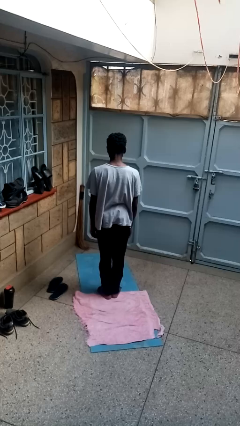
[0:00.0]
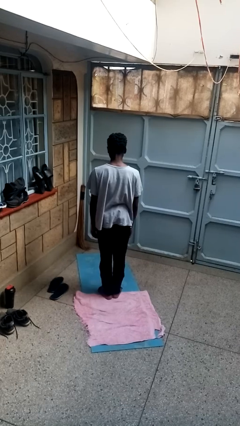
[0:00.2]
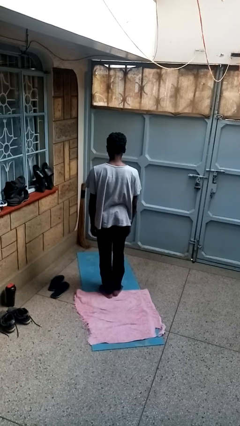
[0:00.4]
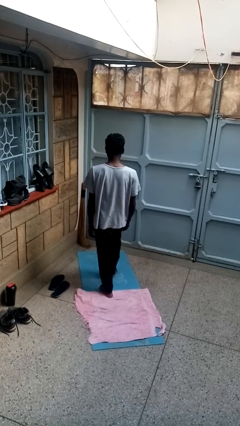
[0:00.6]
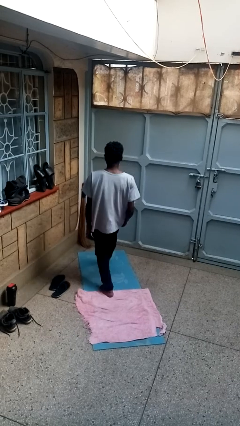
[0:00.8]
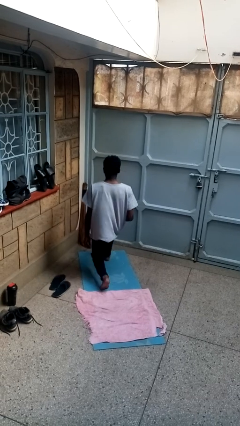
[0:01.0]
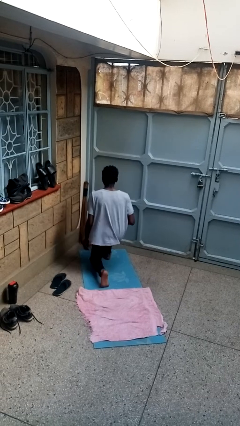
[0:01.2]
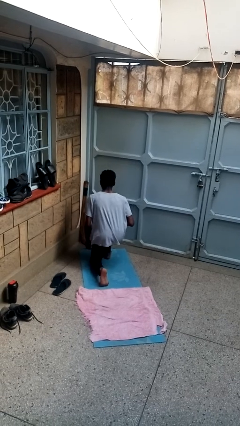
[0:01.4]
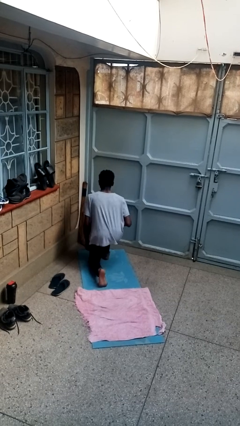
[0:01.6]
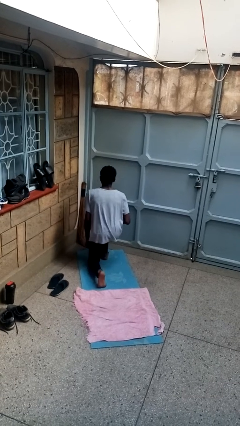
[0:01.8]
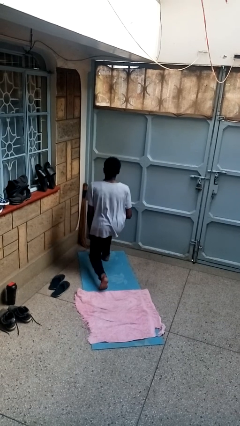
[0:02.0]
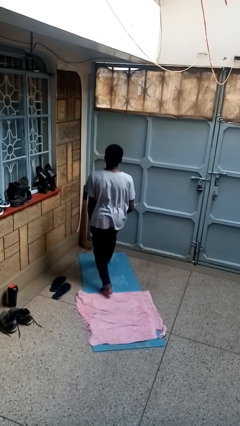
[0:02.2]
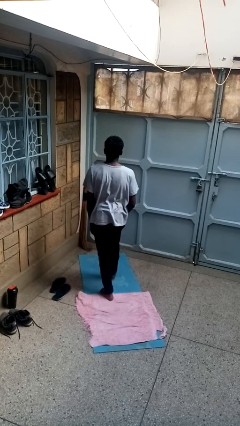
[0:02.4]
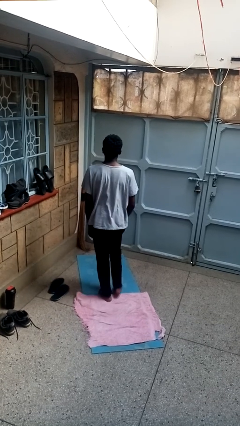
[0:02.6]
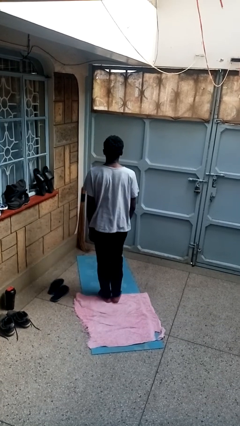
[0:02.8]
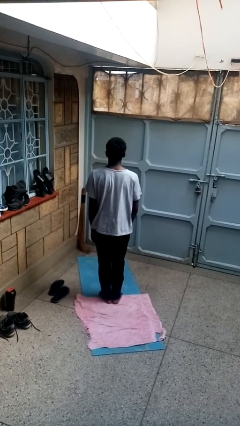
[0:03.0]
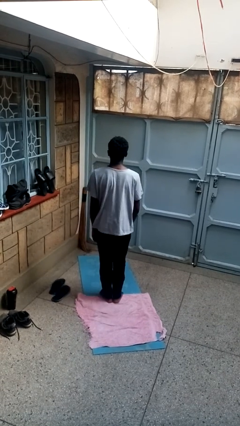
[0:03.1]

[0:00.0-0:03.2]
person exercises with lunges

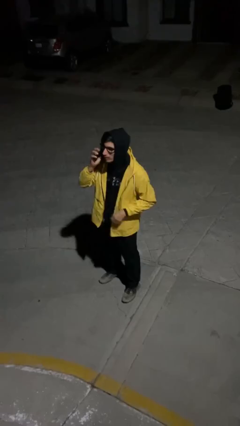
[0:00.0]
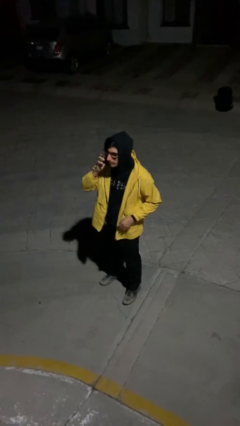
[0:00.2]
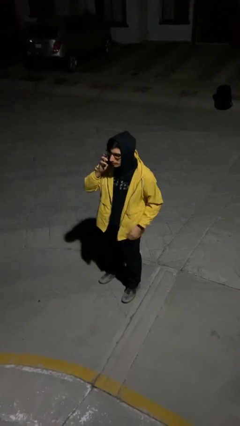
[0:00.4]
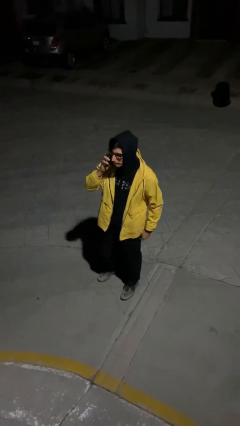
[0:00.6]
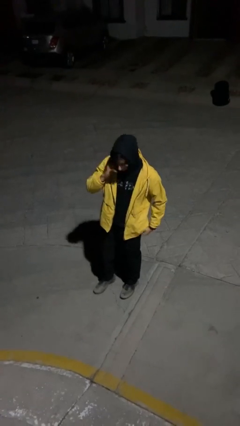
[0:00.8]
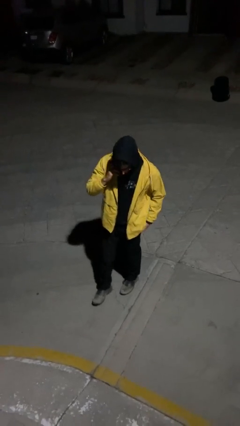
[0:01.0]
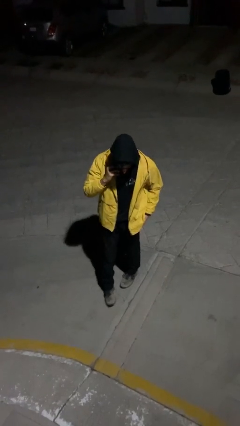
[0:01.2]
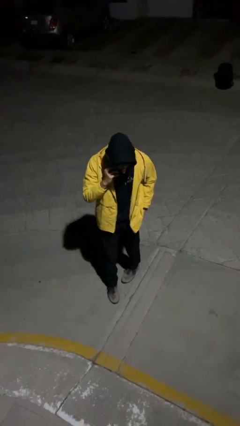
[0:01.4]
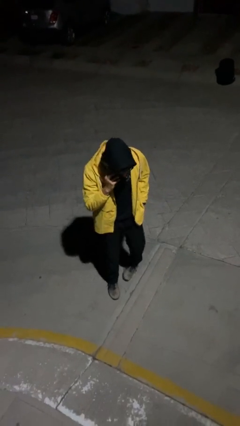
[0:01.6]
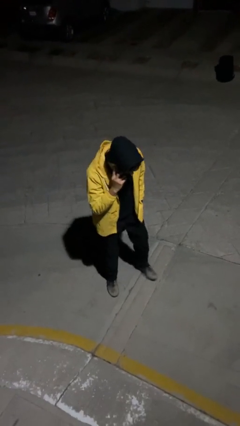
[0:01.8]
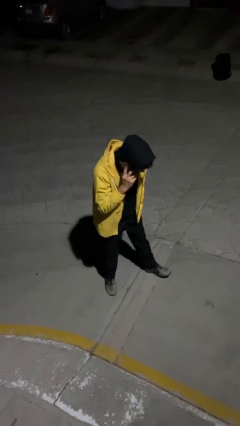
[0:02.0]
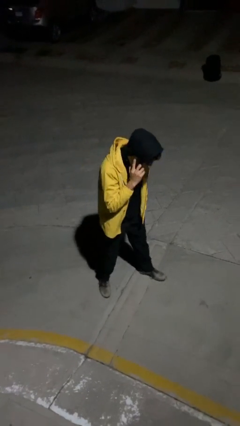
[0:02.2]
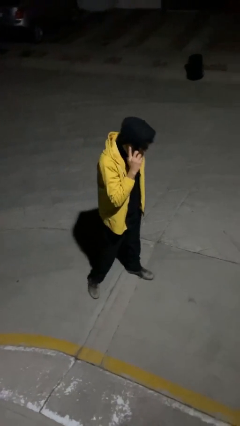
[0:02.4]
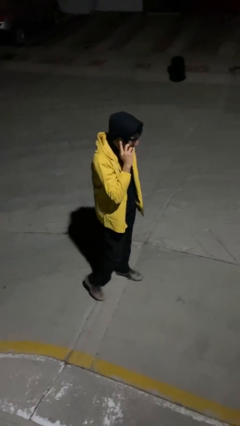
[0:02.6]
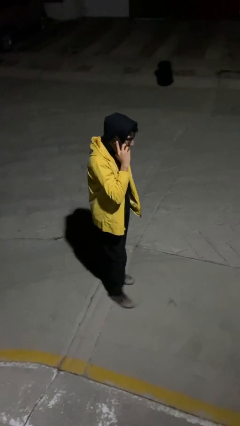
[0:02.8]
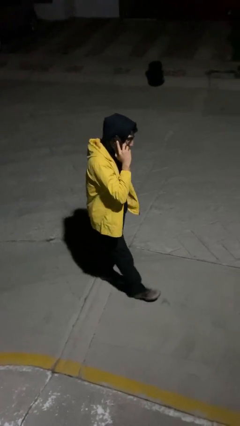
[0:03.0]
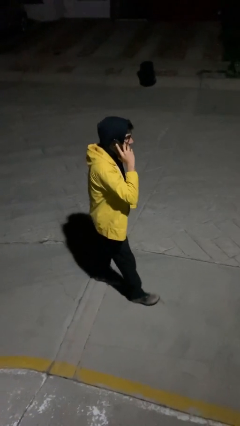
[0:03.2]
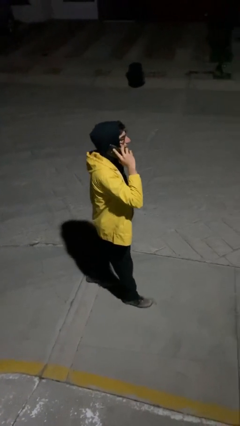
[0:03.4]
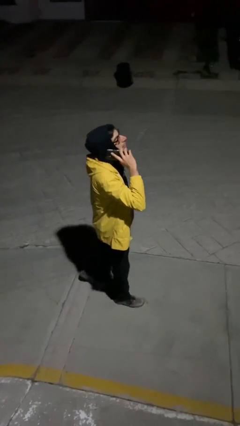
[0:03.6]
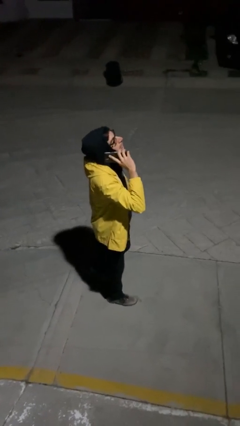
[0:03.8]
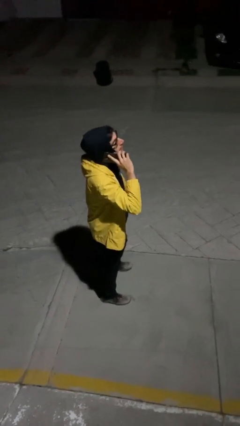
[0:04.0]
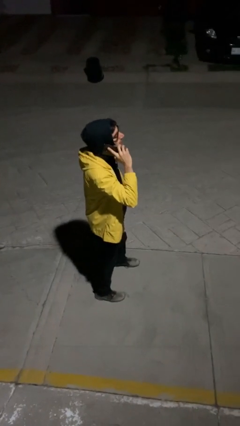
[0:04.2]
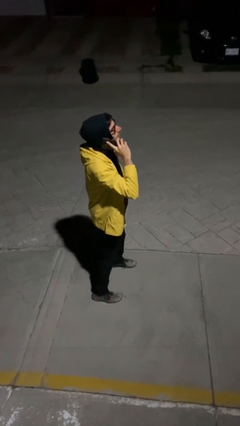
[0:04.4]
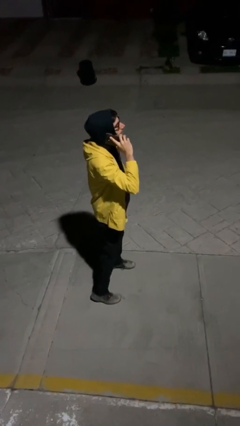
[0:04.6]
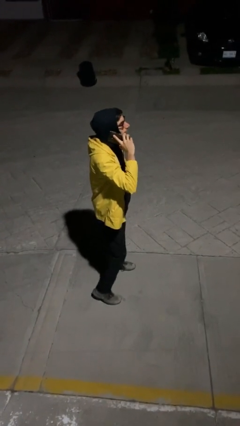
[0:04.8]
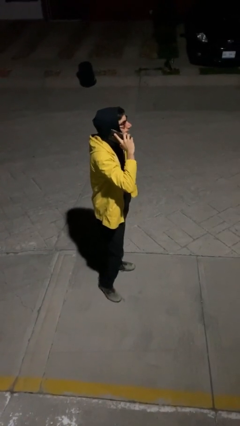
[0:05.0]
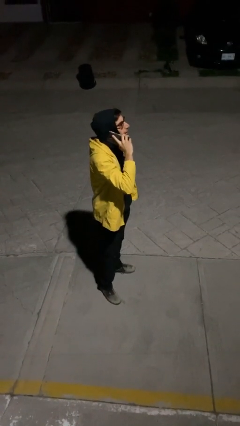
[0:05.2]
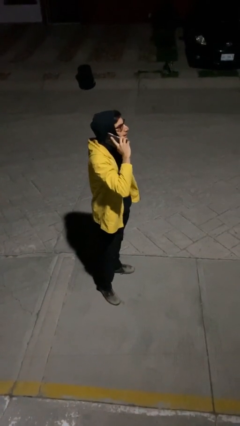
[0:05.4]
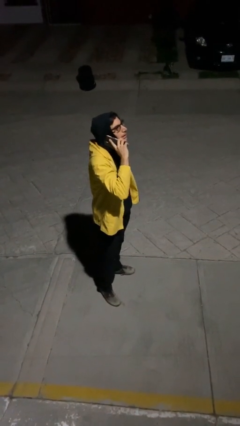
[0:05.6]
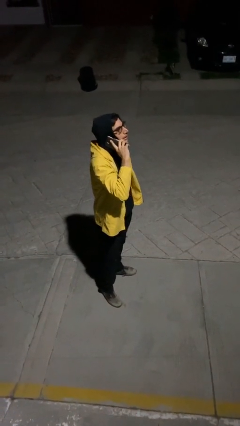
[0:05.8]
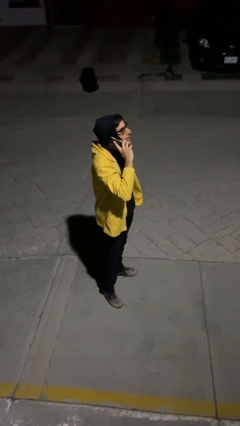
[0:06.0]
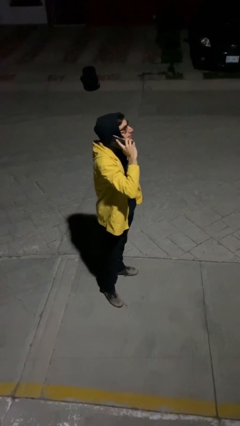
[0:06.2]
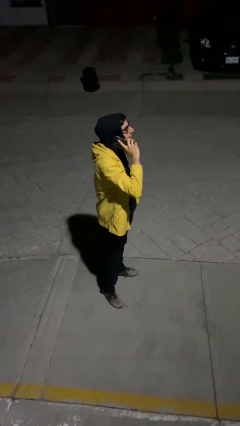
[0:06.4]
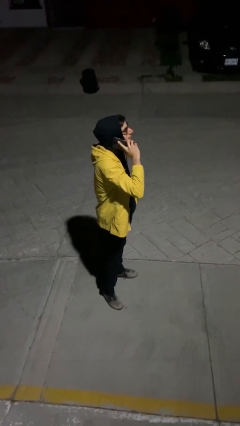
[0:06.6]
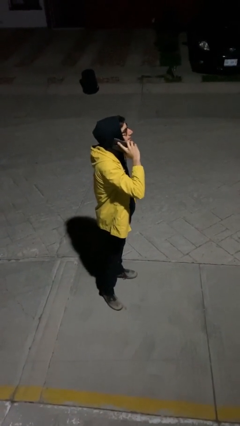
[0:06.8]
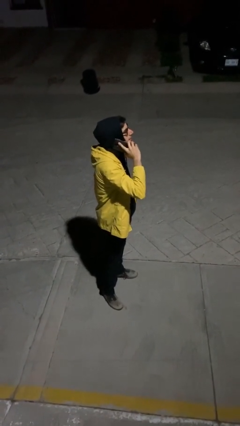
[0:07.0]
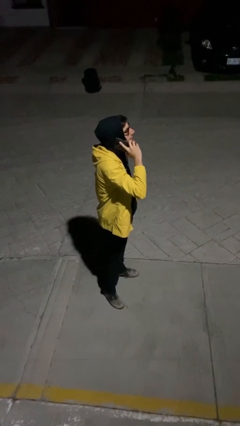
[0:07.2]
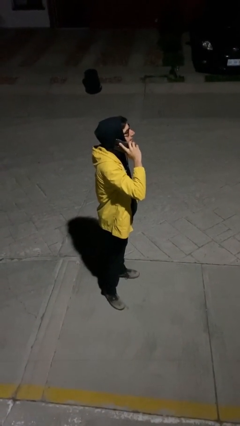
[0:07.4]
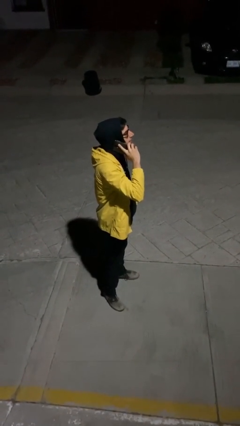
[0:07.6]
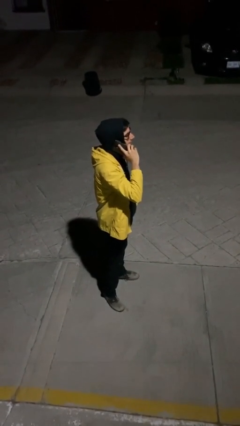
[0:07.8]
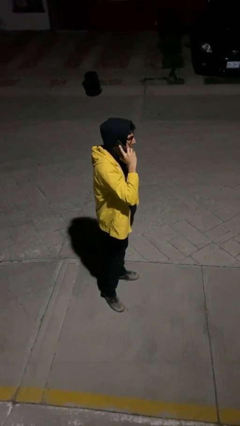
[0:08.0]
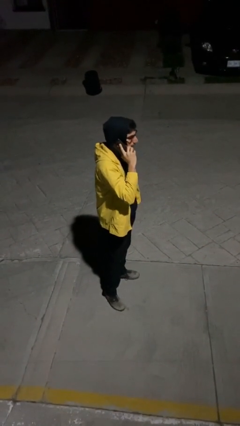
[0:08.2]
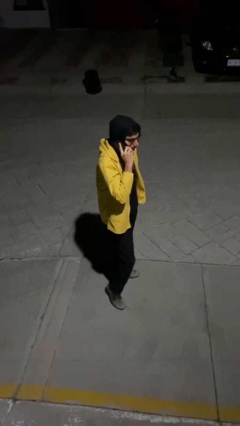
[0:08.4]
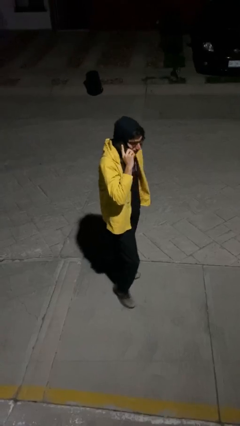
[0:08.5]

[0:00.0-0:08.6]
person talks on phone

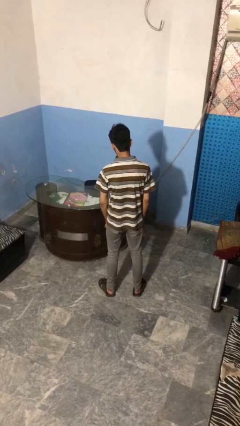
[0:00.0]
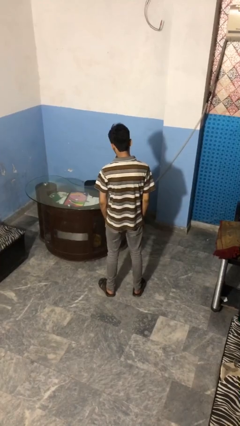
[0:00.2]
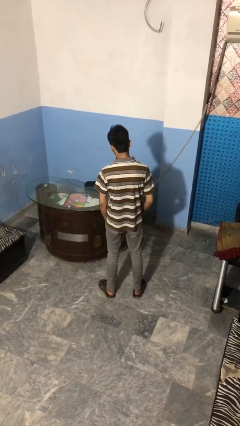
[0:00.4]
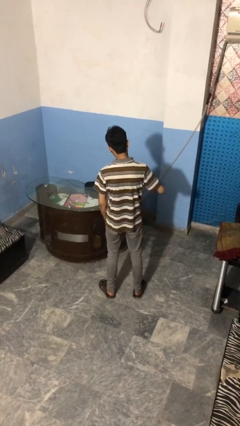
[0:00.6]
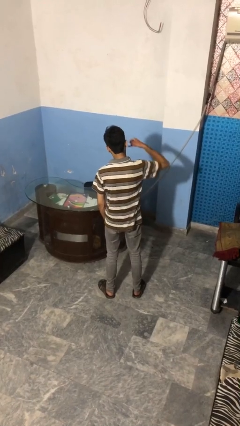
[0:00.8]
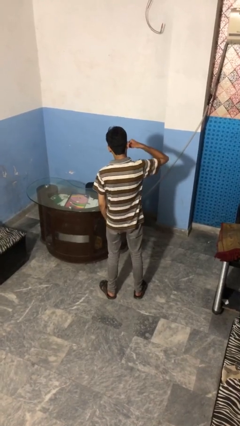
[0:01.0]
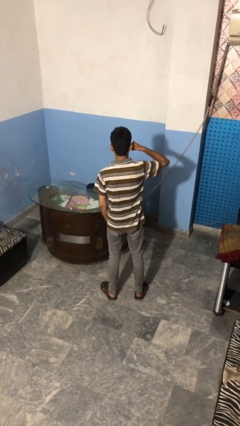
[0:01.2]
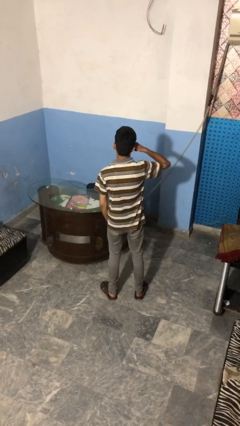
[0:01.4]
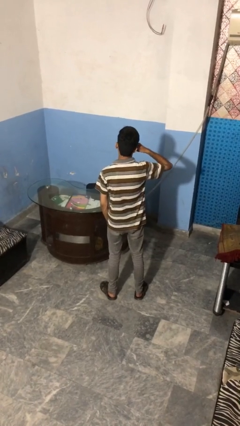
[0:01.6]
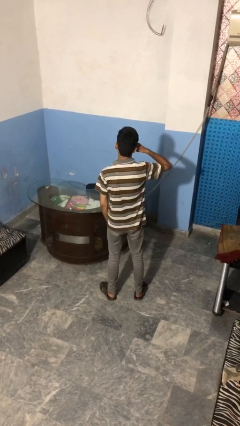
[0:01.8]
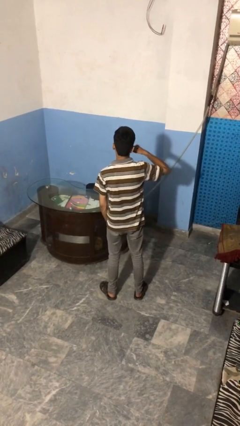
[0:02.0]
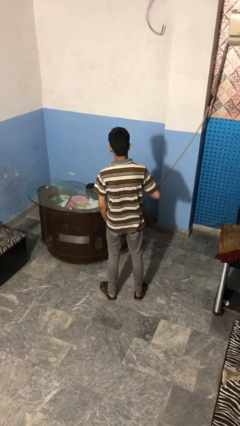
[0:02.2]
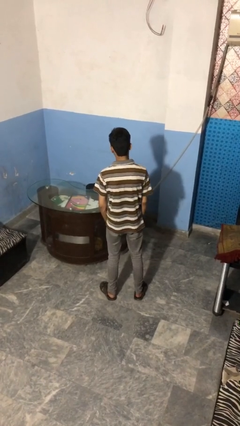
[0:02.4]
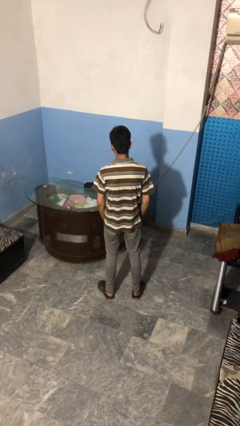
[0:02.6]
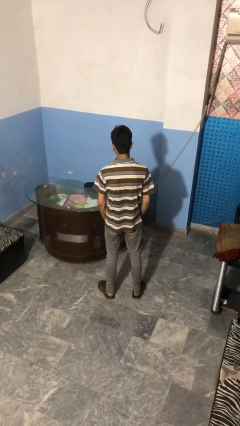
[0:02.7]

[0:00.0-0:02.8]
person gestures call me

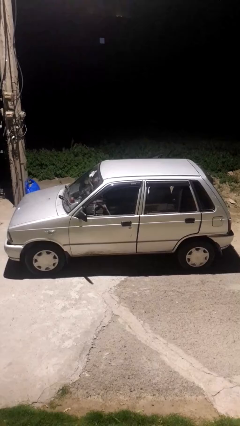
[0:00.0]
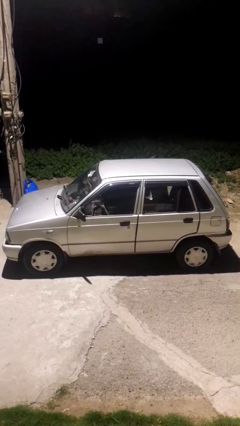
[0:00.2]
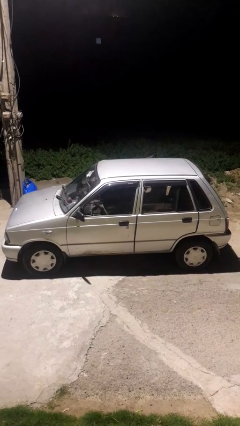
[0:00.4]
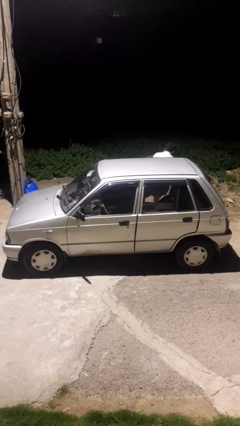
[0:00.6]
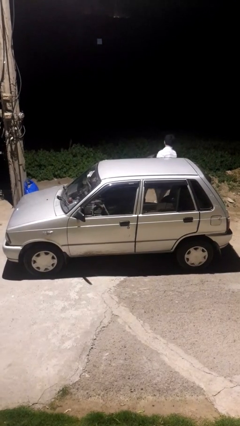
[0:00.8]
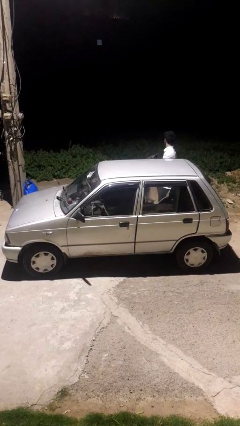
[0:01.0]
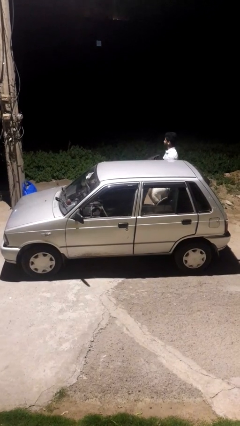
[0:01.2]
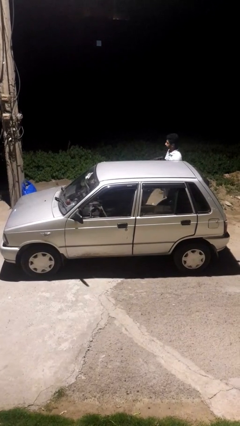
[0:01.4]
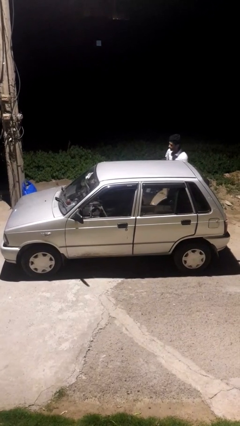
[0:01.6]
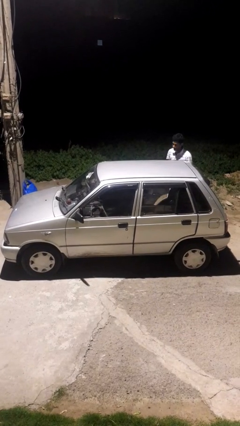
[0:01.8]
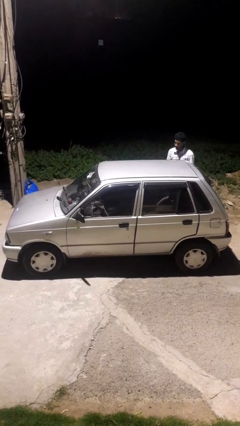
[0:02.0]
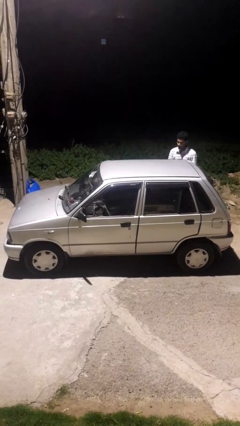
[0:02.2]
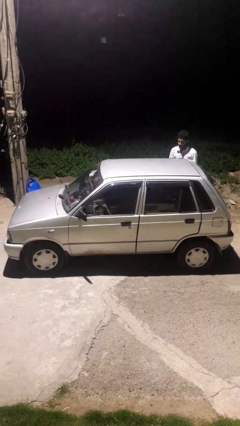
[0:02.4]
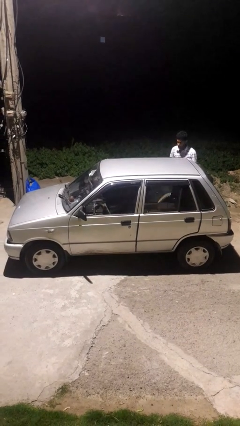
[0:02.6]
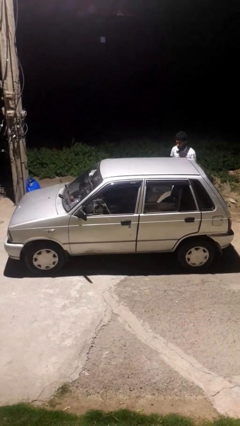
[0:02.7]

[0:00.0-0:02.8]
car drops off person

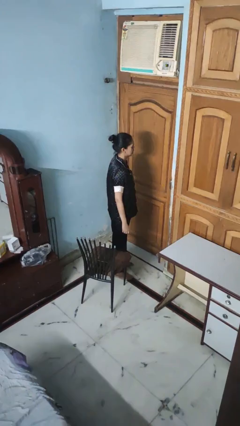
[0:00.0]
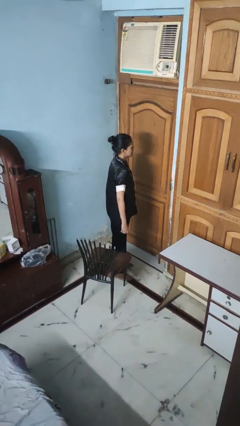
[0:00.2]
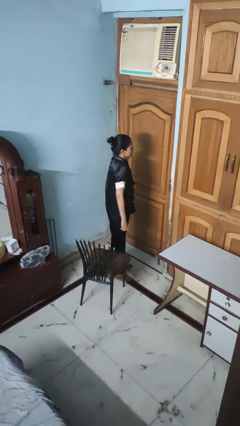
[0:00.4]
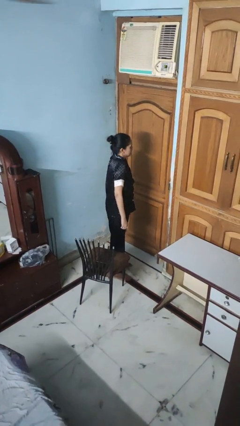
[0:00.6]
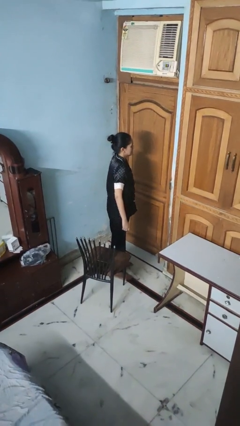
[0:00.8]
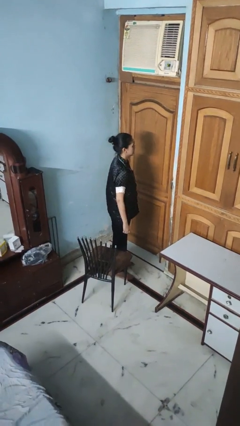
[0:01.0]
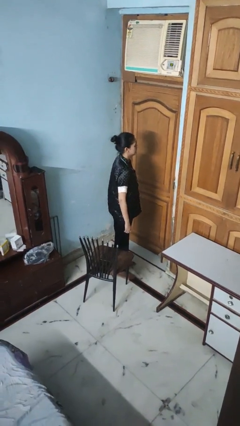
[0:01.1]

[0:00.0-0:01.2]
person shrugs
